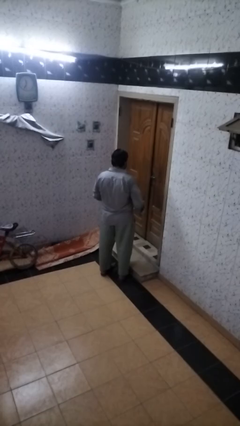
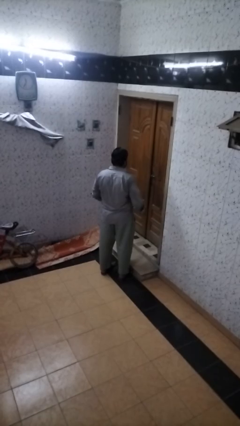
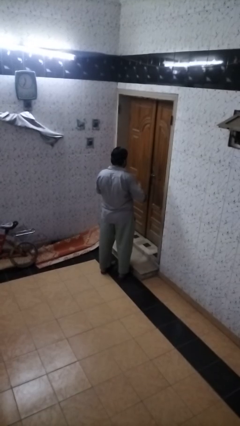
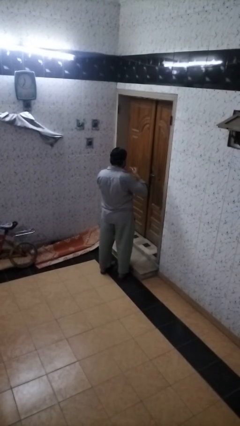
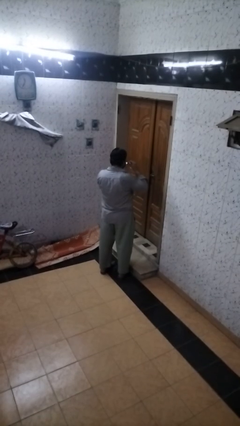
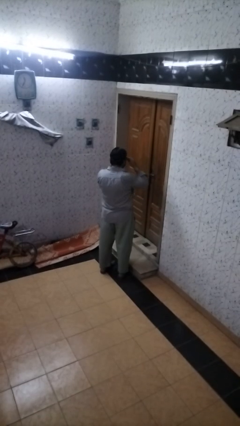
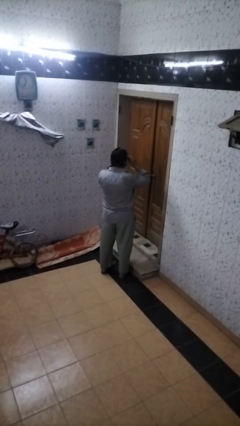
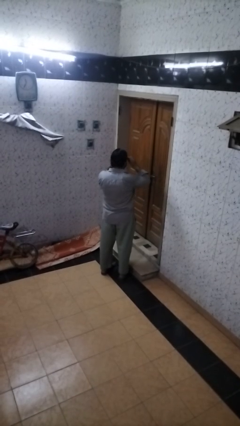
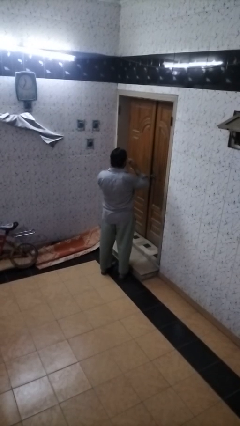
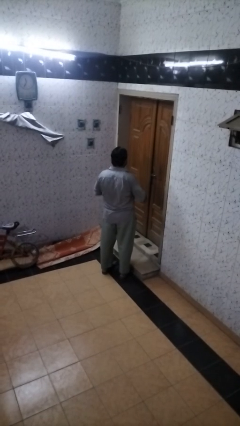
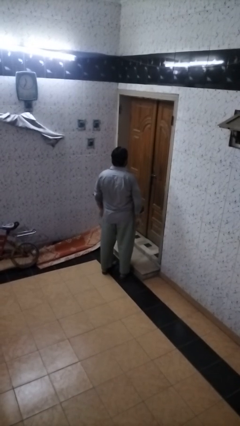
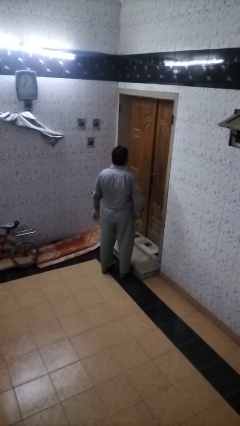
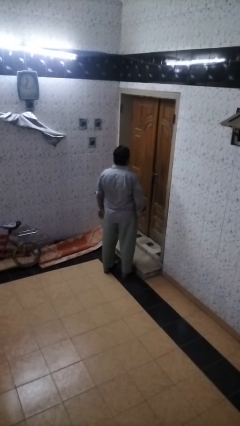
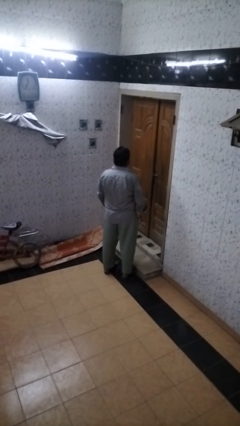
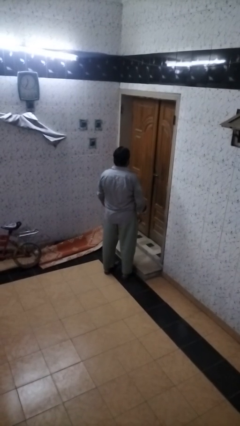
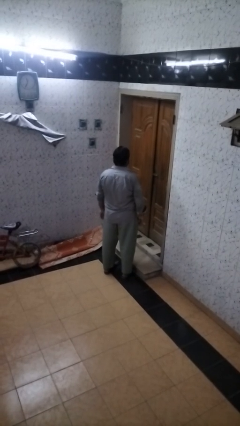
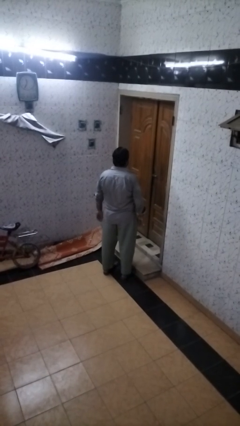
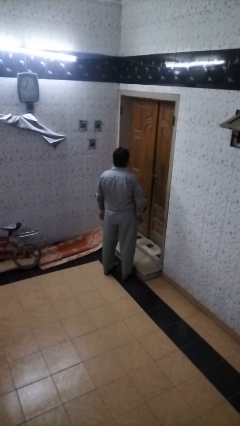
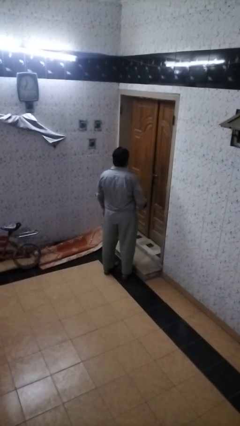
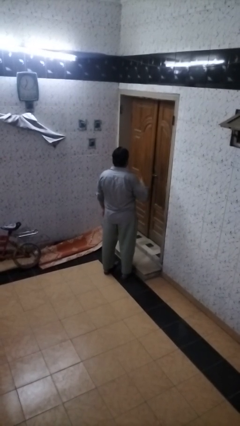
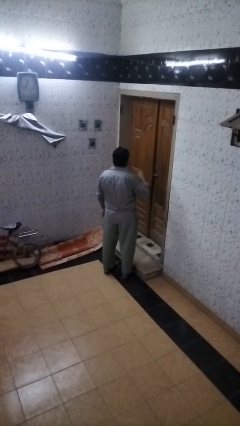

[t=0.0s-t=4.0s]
person puts on sunglasses

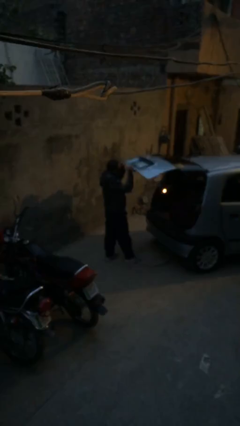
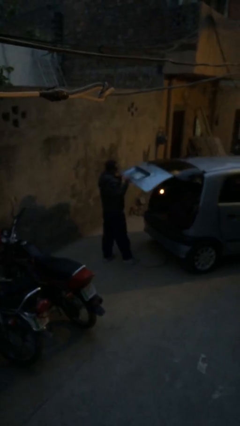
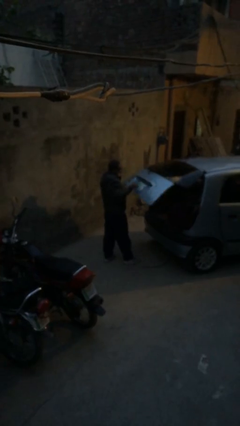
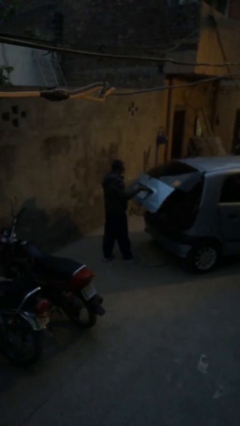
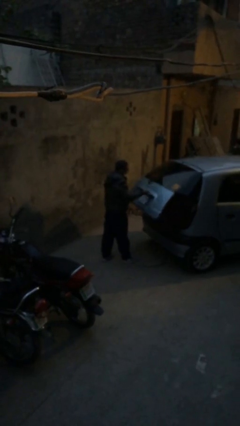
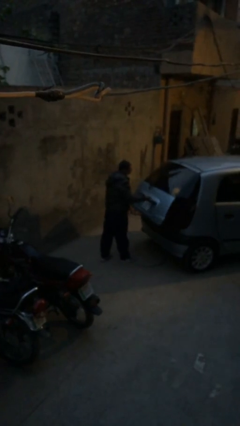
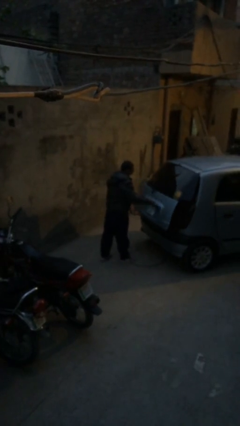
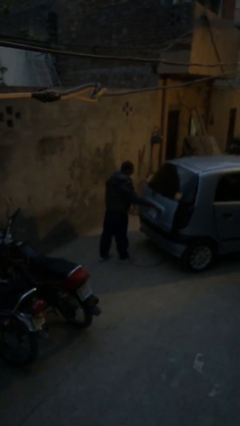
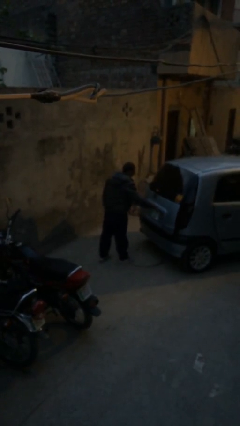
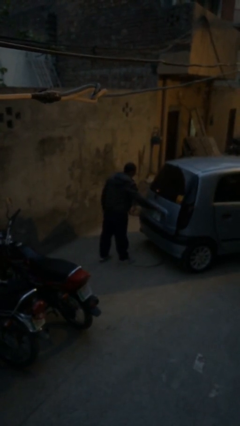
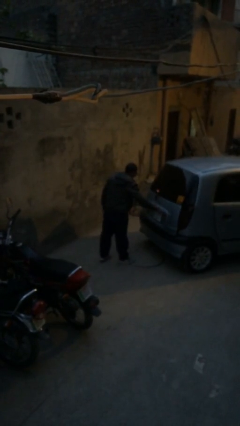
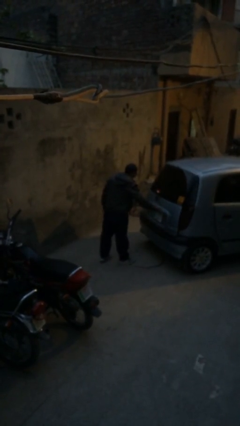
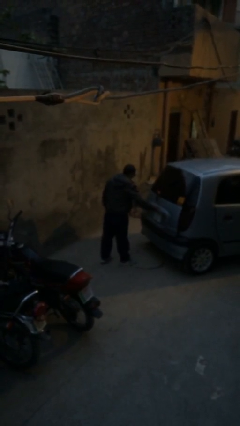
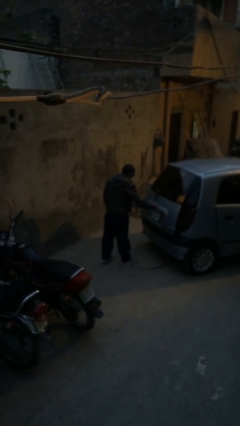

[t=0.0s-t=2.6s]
person closes car trunk

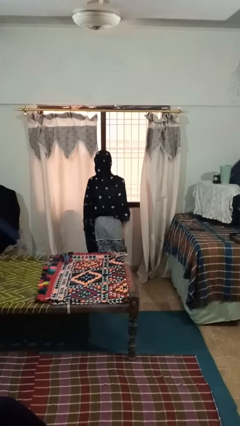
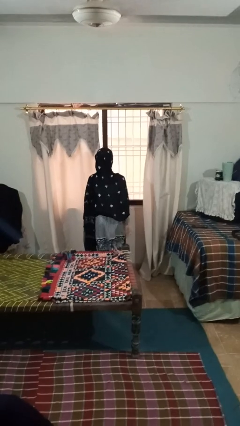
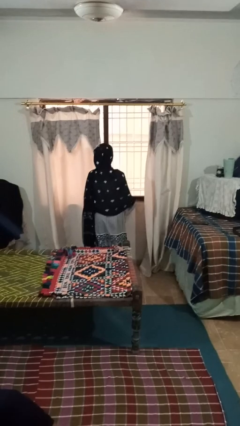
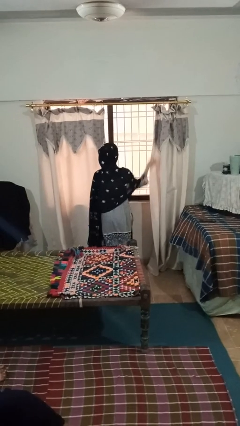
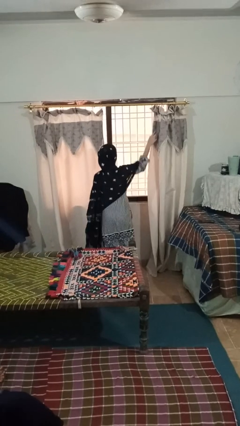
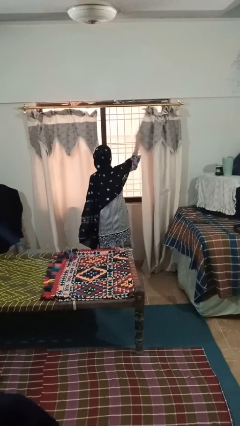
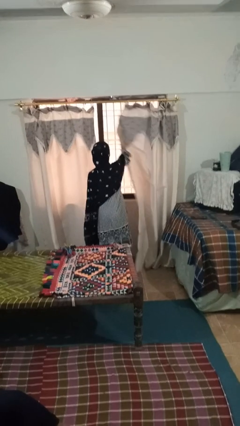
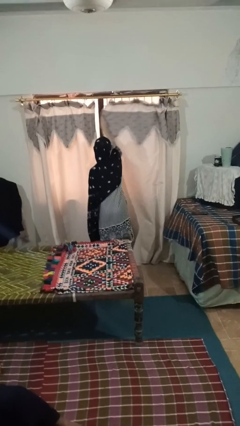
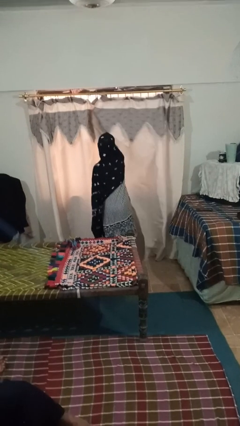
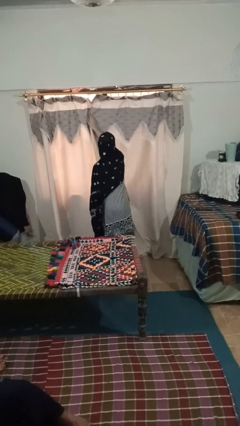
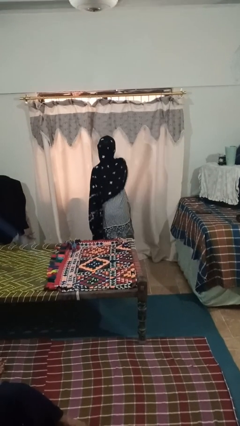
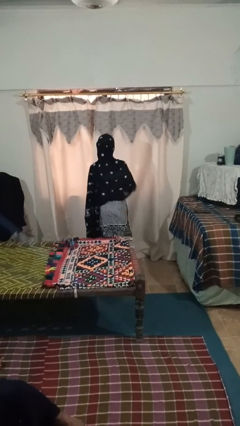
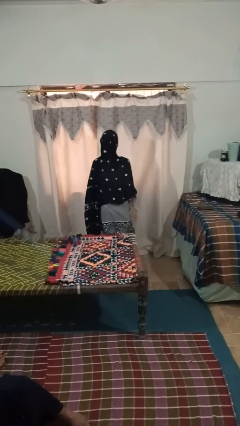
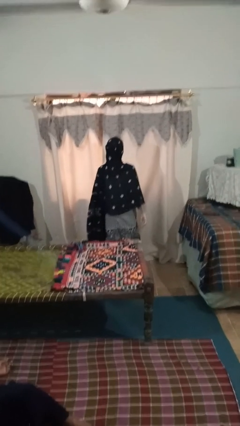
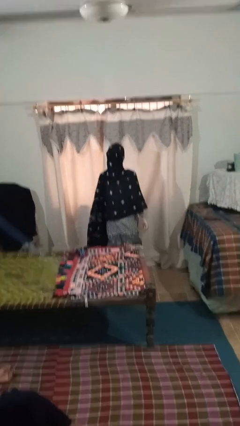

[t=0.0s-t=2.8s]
person closes curtains

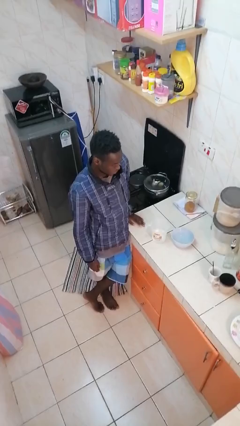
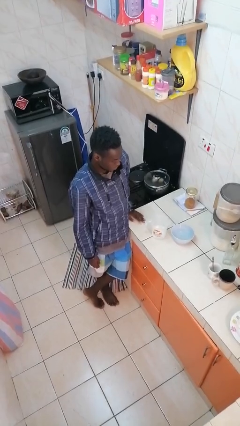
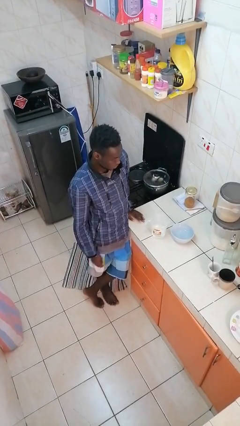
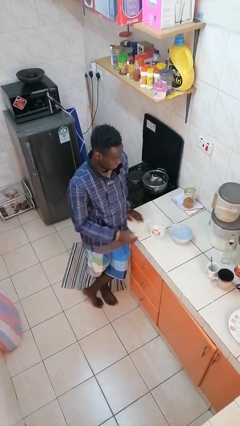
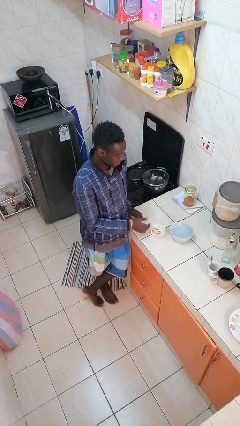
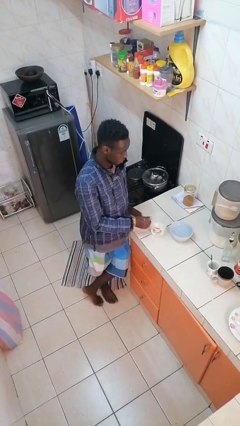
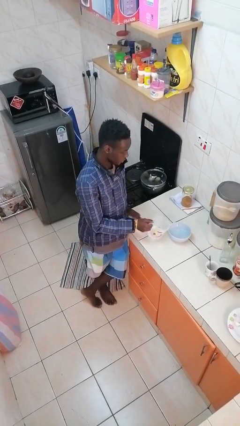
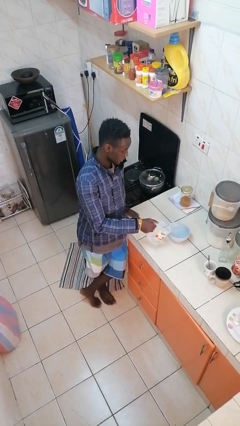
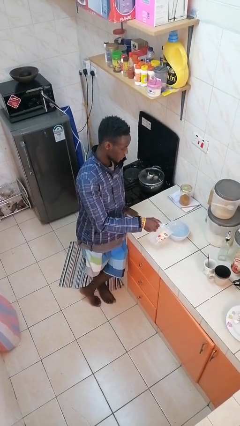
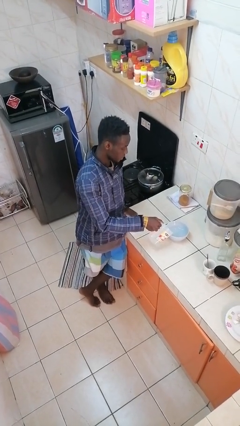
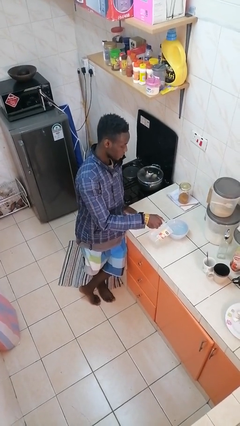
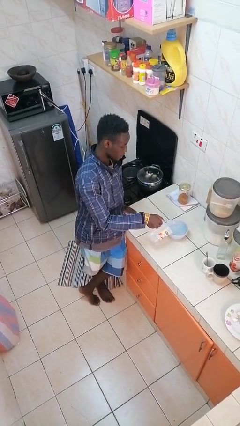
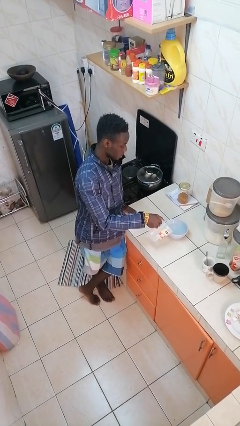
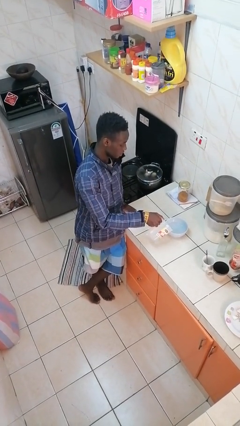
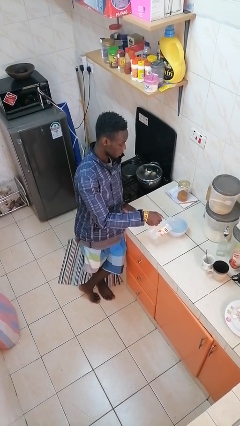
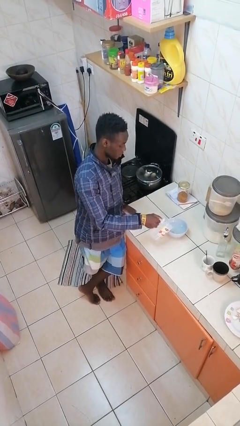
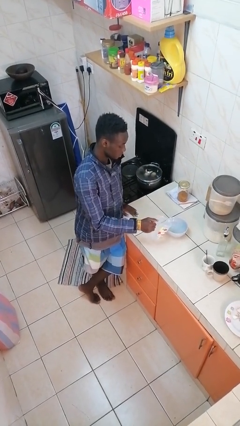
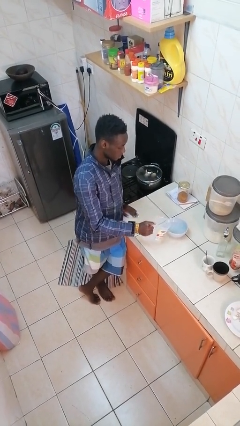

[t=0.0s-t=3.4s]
person pours into bowl

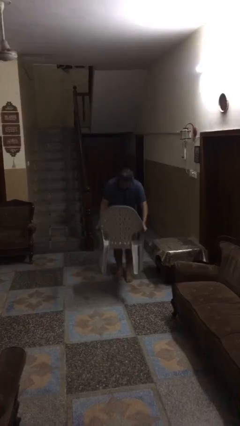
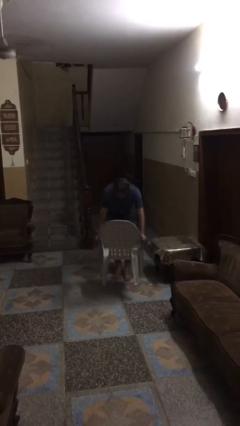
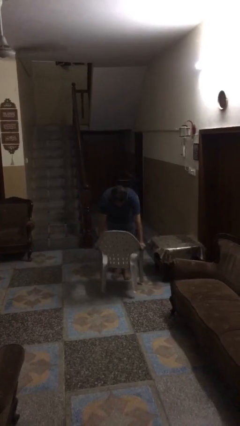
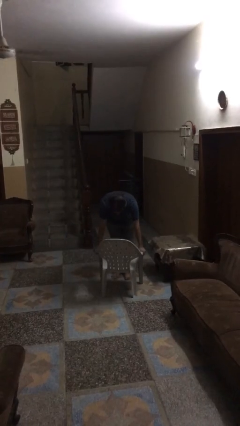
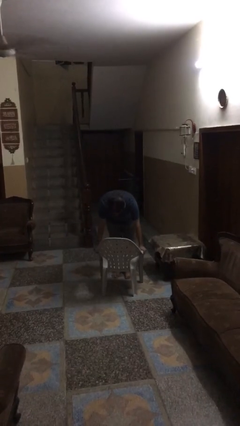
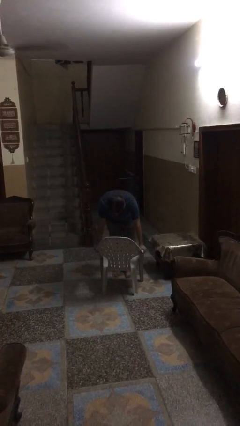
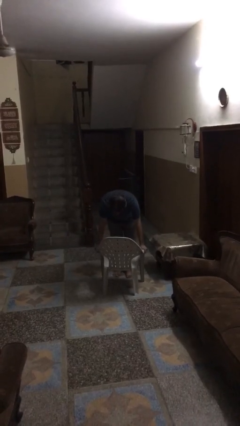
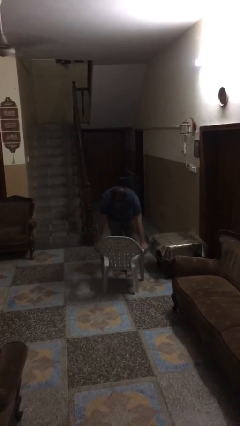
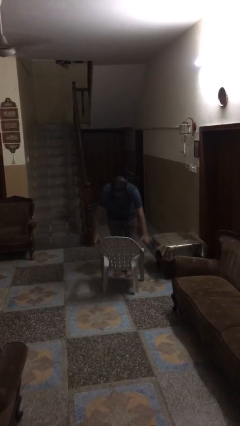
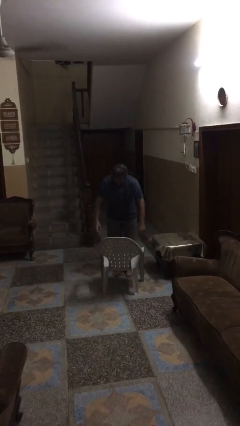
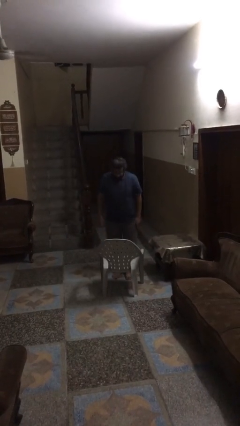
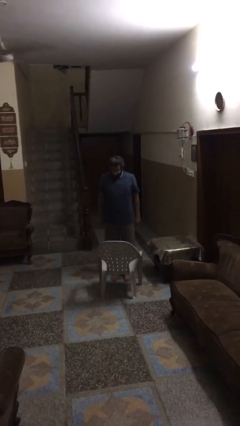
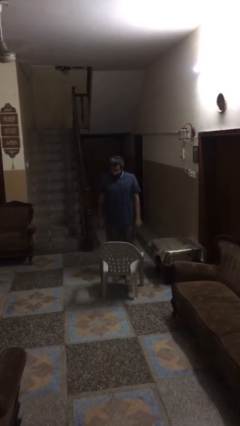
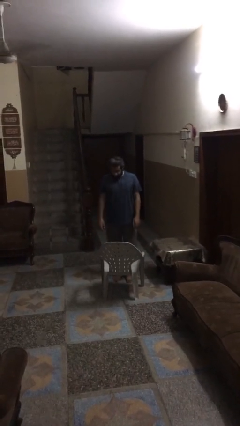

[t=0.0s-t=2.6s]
person puts down object on floor

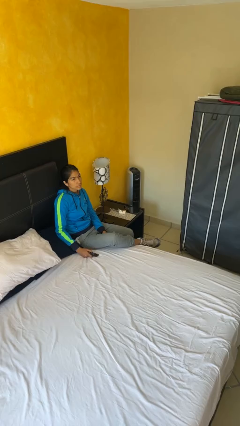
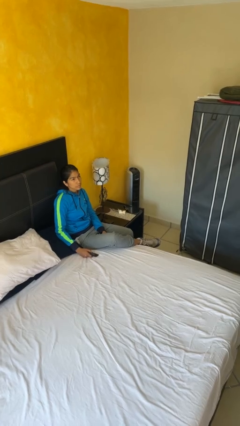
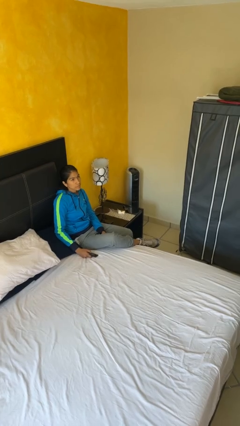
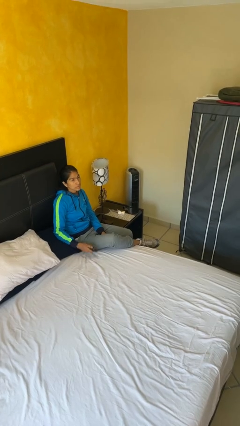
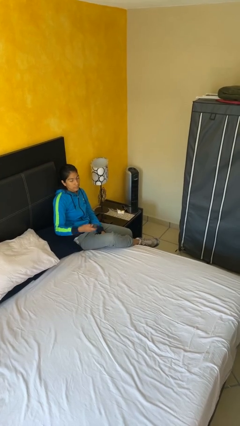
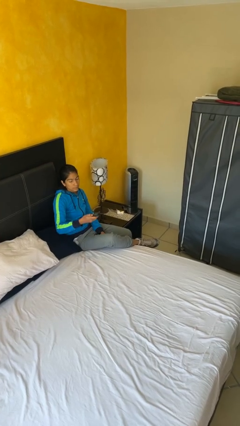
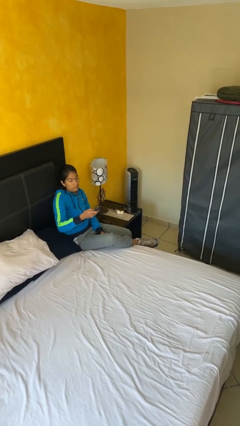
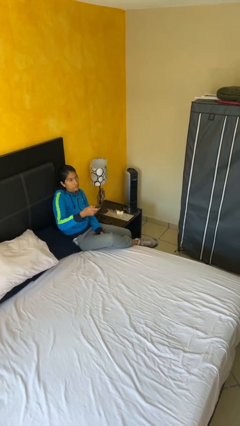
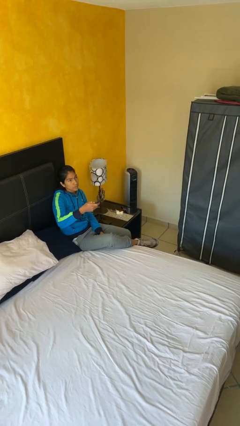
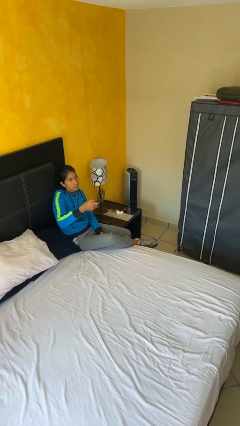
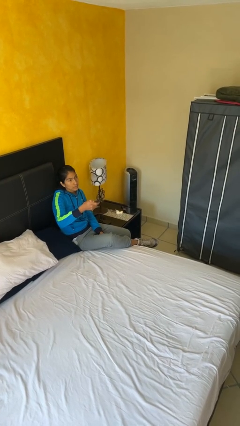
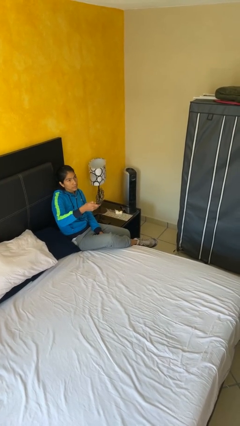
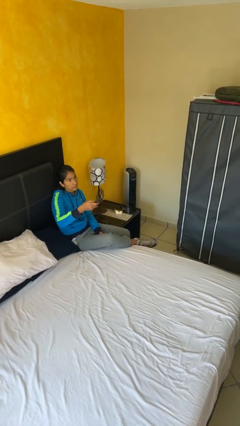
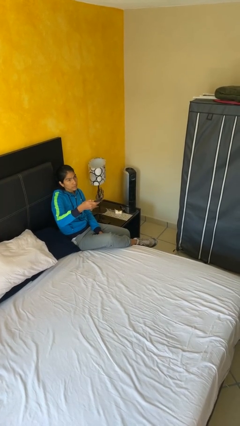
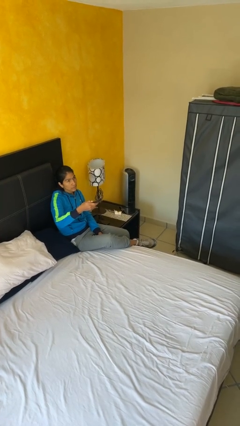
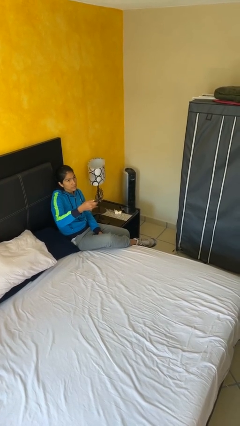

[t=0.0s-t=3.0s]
person uses television remote
